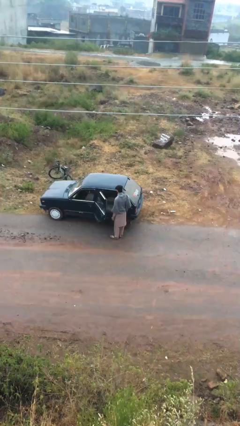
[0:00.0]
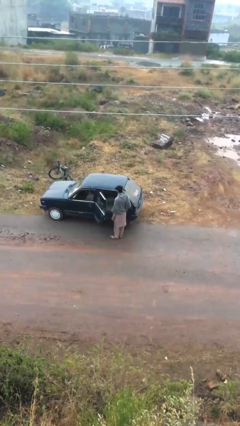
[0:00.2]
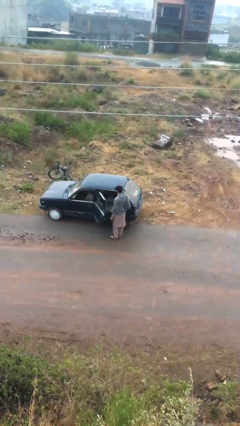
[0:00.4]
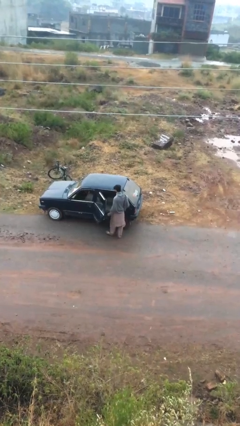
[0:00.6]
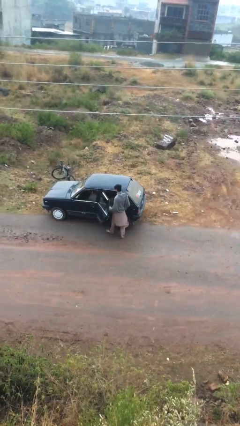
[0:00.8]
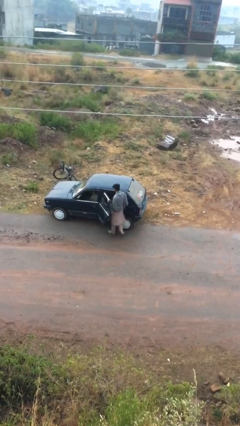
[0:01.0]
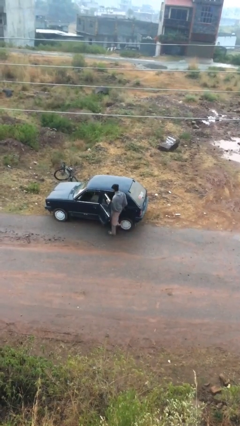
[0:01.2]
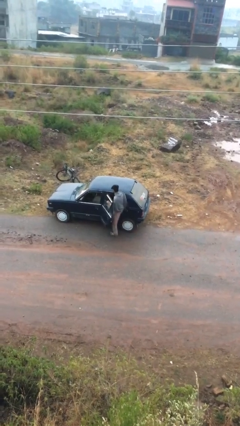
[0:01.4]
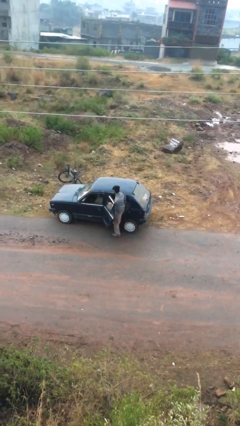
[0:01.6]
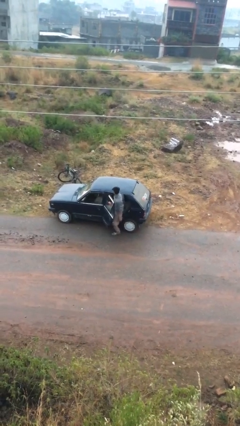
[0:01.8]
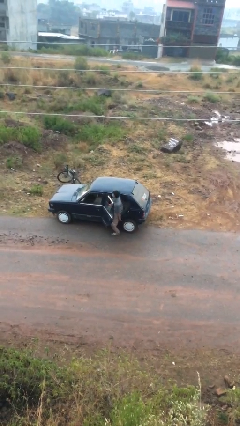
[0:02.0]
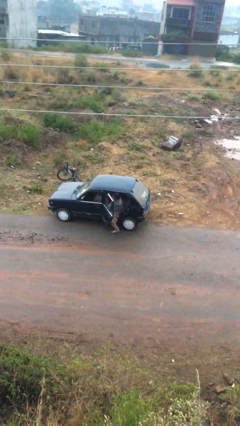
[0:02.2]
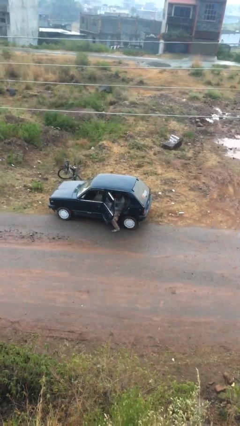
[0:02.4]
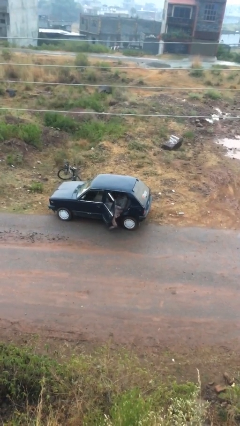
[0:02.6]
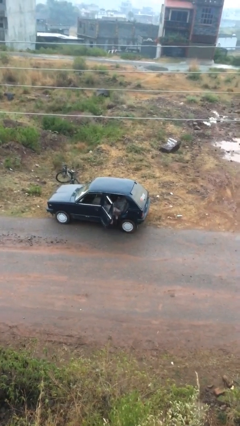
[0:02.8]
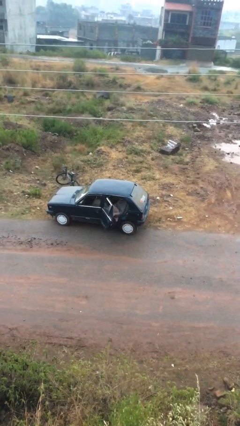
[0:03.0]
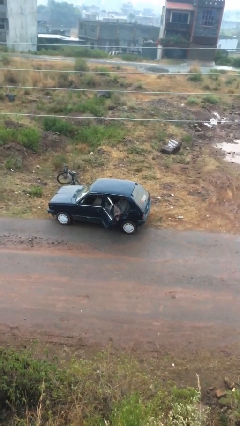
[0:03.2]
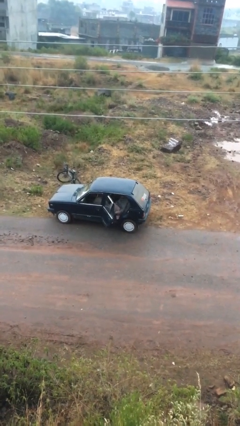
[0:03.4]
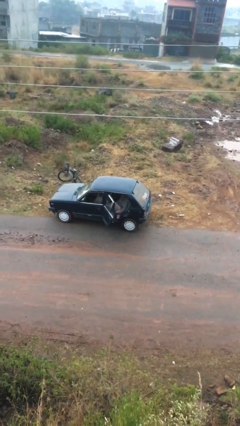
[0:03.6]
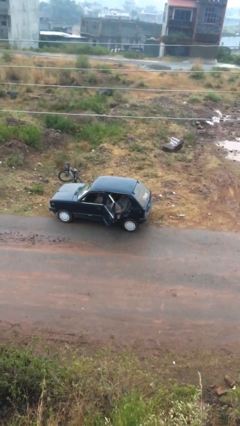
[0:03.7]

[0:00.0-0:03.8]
person enters car

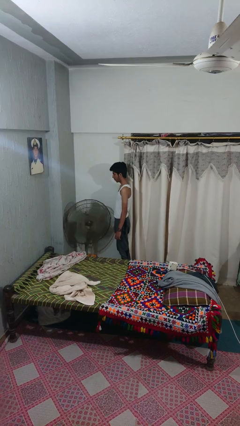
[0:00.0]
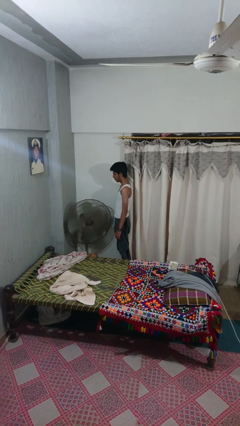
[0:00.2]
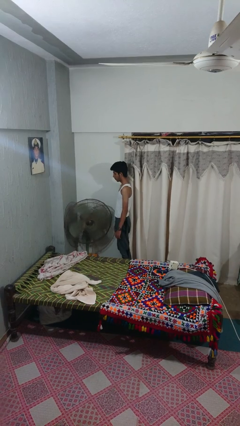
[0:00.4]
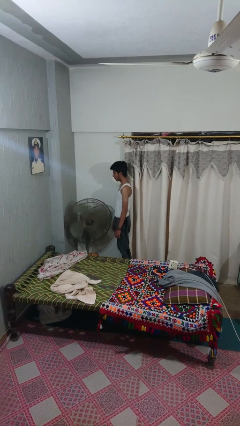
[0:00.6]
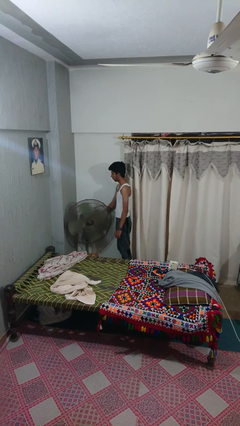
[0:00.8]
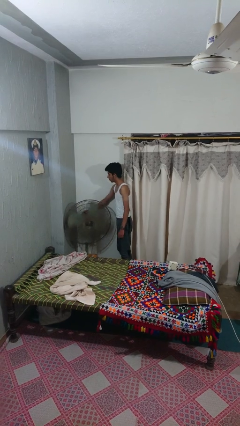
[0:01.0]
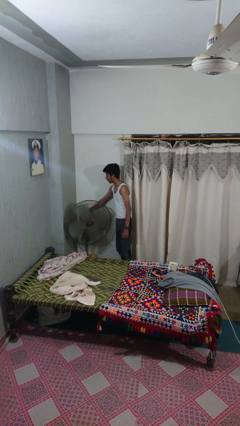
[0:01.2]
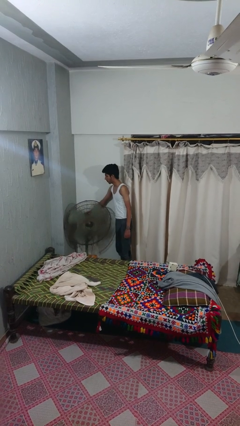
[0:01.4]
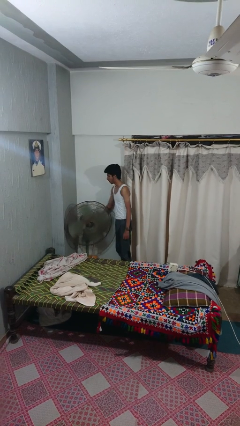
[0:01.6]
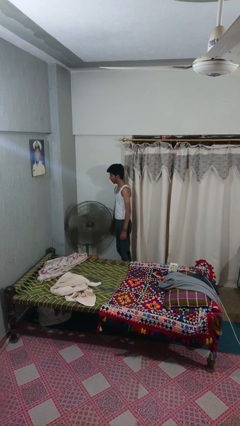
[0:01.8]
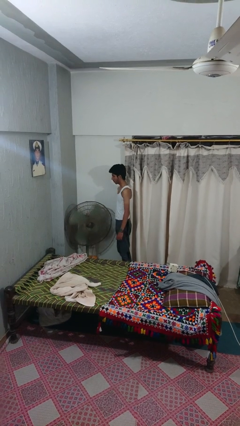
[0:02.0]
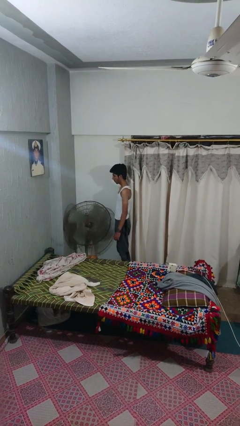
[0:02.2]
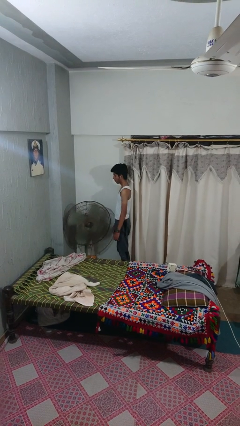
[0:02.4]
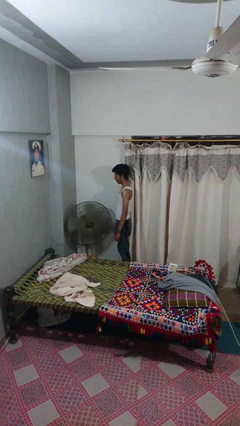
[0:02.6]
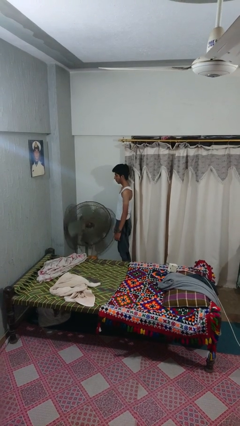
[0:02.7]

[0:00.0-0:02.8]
person turns off fan

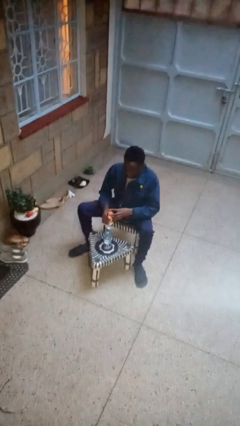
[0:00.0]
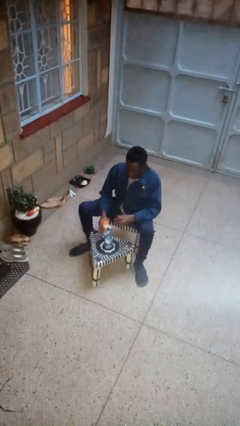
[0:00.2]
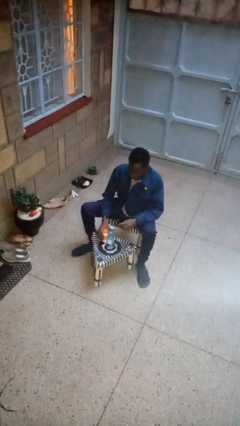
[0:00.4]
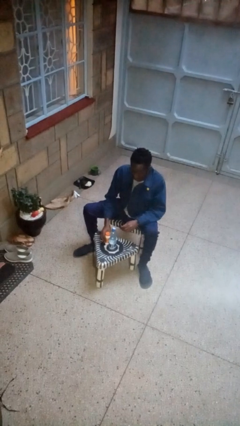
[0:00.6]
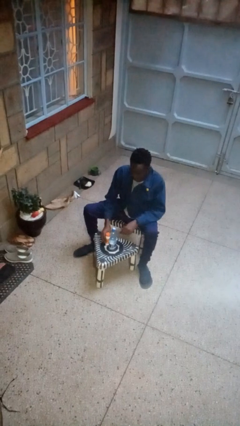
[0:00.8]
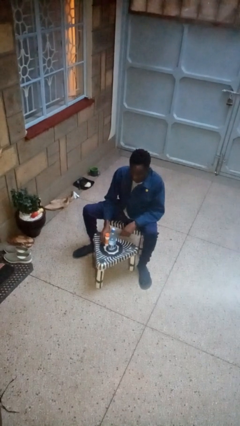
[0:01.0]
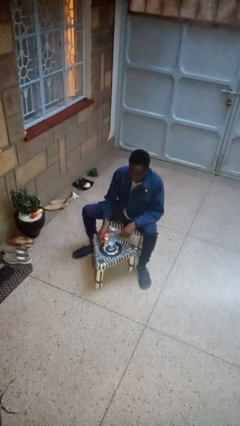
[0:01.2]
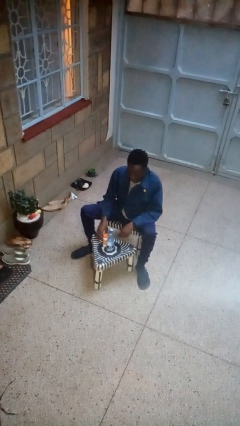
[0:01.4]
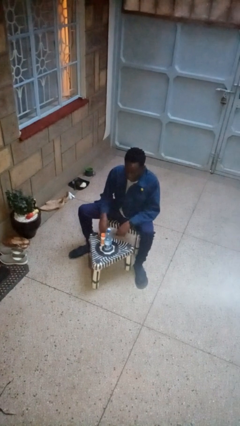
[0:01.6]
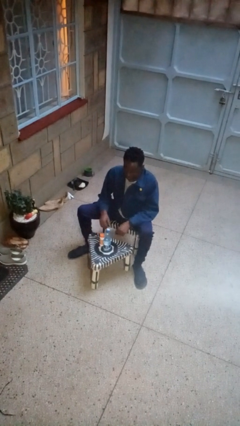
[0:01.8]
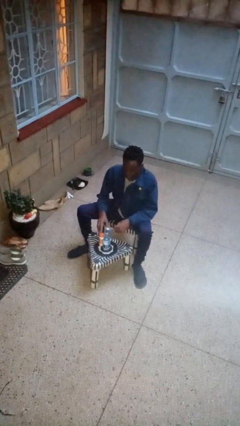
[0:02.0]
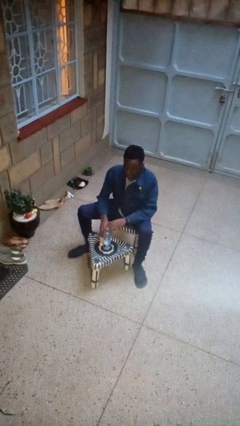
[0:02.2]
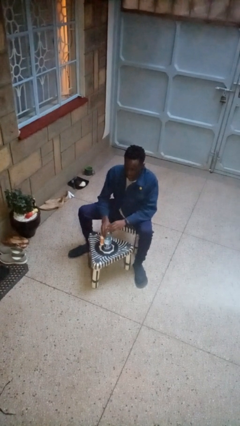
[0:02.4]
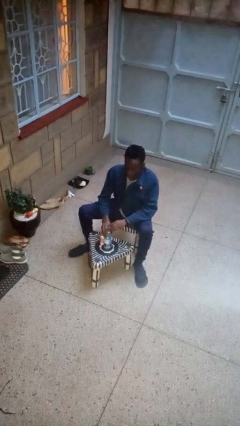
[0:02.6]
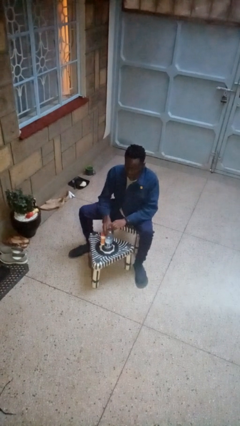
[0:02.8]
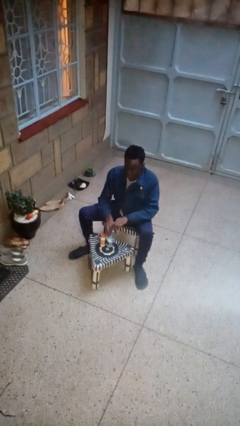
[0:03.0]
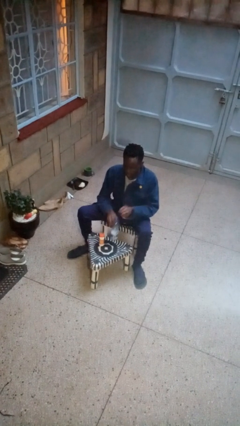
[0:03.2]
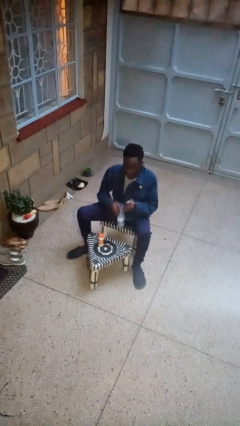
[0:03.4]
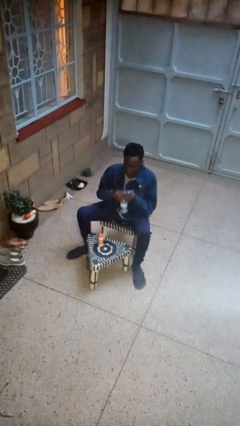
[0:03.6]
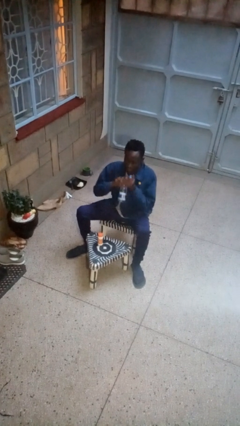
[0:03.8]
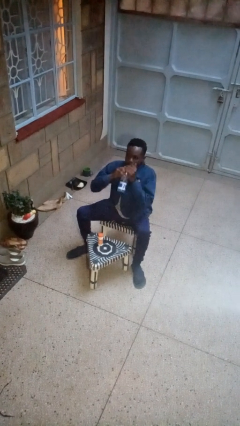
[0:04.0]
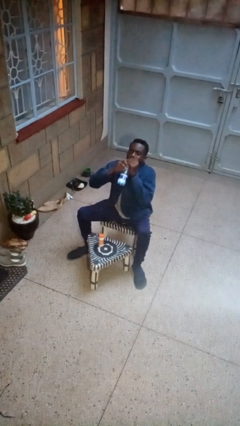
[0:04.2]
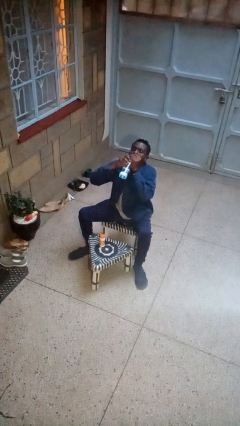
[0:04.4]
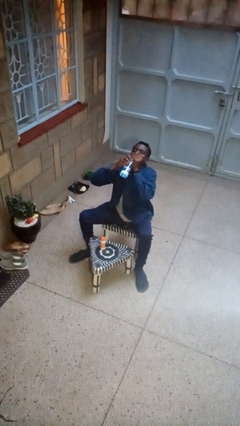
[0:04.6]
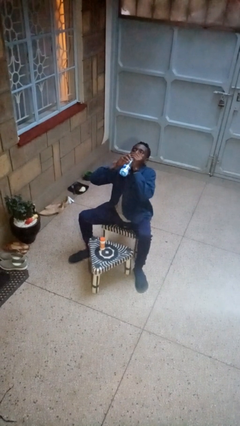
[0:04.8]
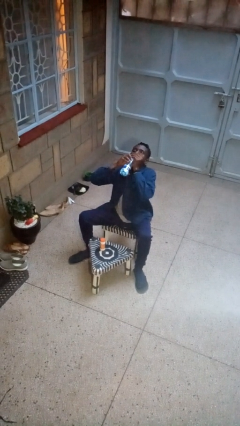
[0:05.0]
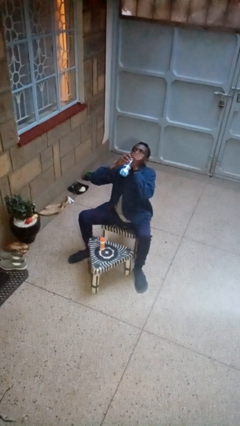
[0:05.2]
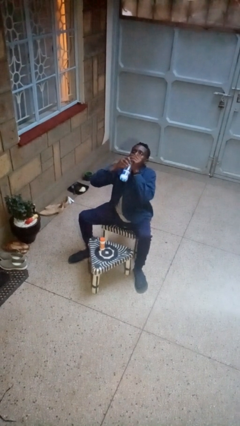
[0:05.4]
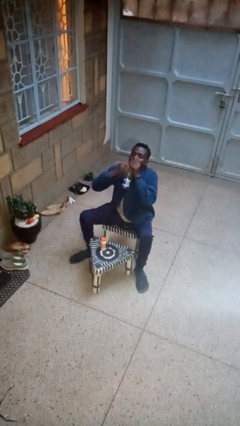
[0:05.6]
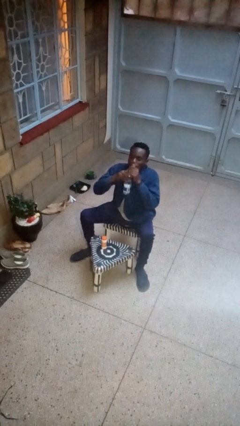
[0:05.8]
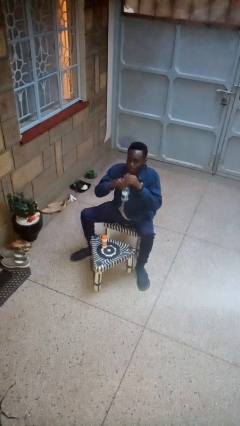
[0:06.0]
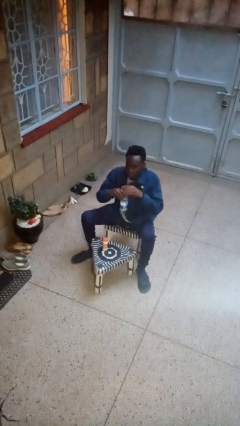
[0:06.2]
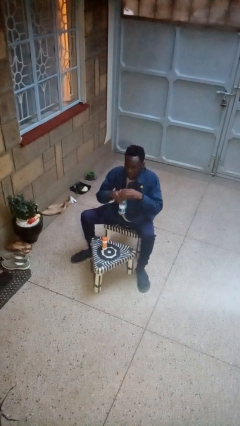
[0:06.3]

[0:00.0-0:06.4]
person drinks from cup

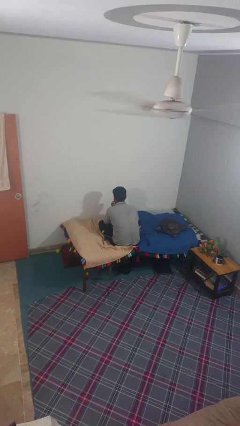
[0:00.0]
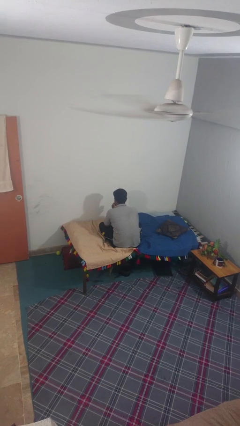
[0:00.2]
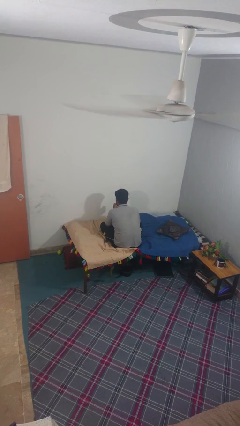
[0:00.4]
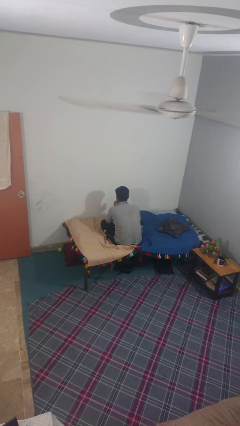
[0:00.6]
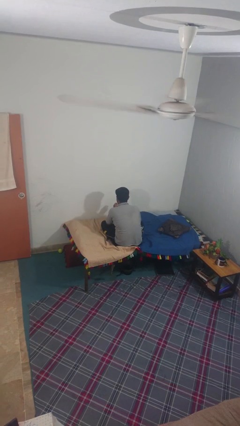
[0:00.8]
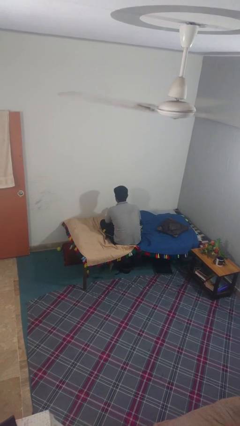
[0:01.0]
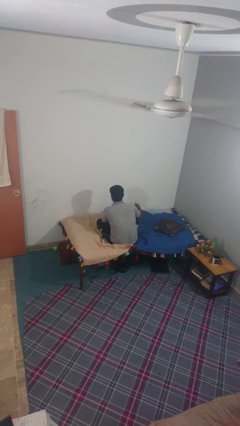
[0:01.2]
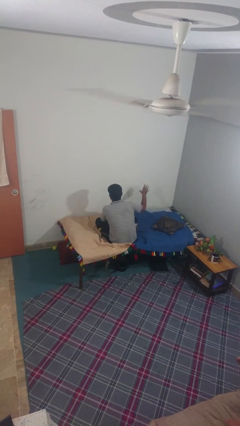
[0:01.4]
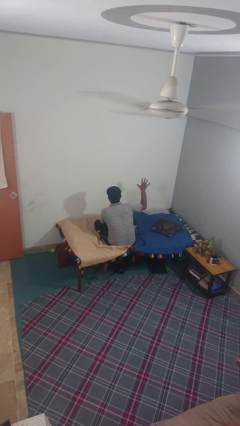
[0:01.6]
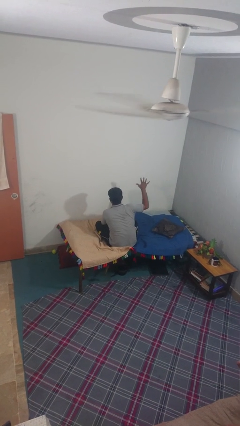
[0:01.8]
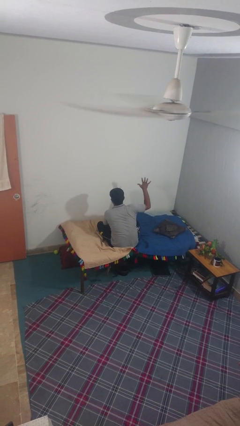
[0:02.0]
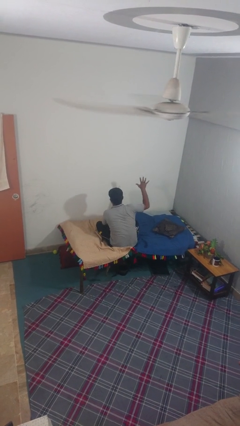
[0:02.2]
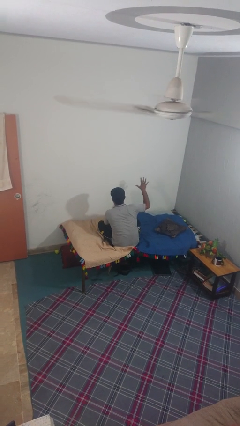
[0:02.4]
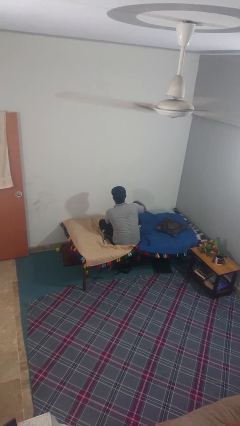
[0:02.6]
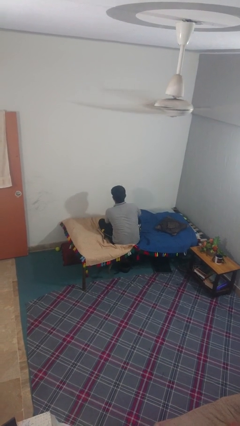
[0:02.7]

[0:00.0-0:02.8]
person gestures number five

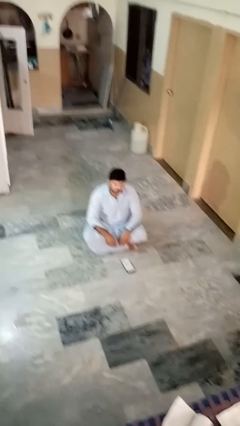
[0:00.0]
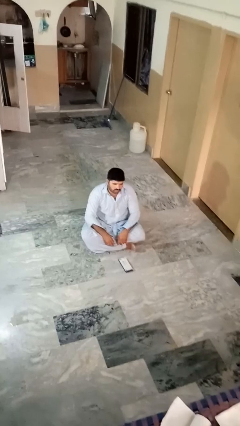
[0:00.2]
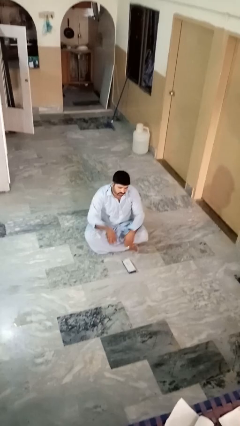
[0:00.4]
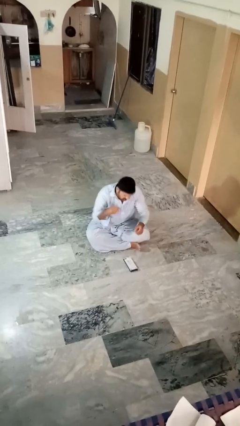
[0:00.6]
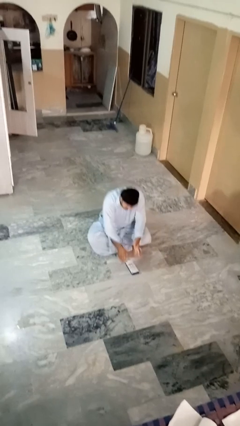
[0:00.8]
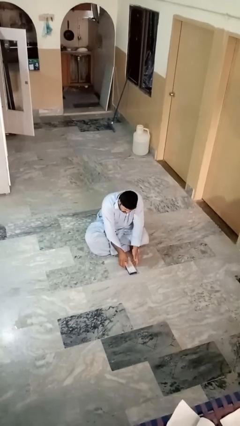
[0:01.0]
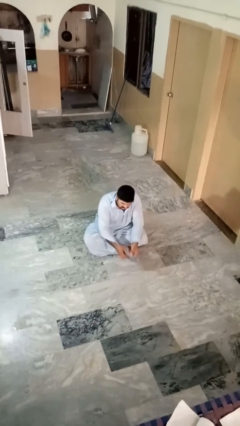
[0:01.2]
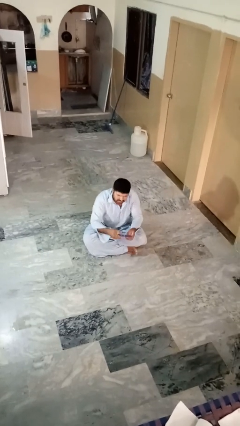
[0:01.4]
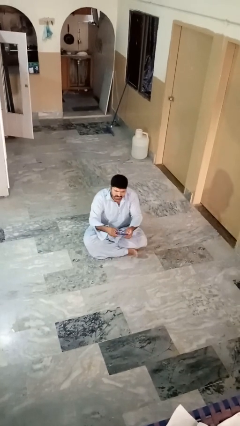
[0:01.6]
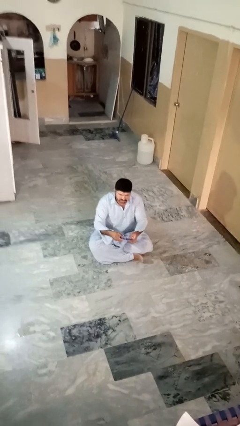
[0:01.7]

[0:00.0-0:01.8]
person picks up object from floor

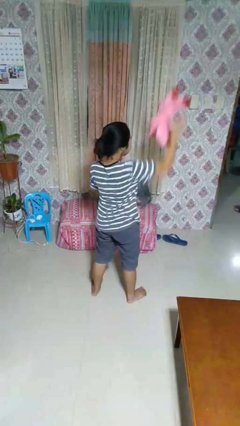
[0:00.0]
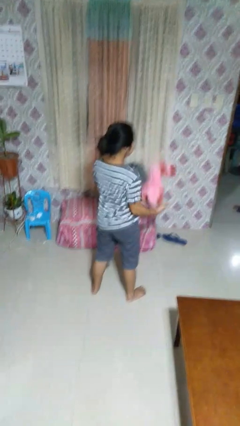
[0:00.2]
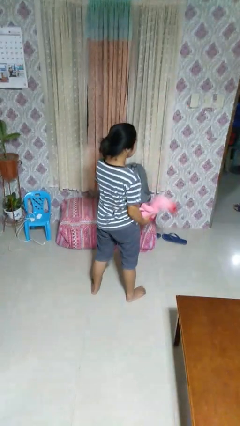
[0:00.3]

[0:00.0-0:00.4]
person catches dropped object
